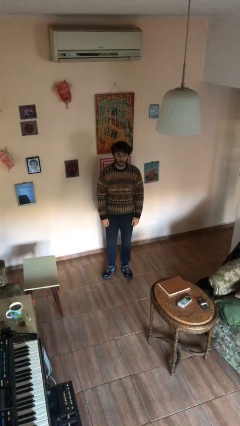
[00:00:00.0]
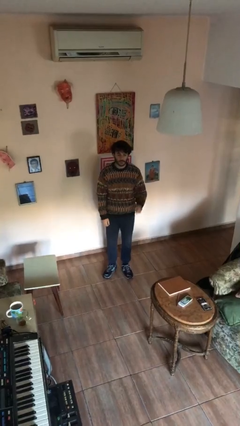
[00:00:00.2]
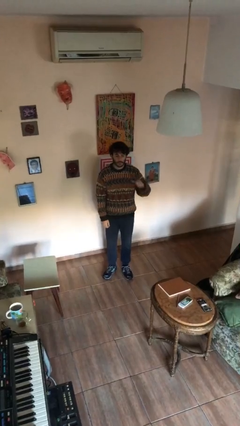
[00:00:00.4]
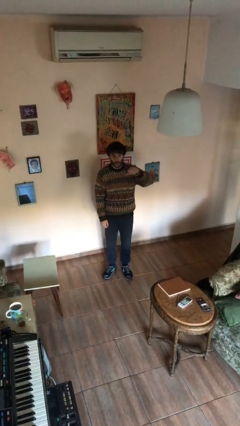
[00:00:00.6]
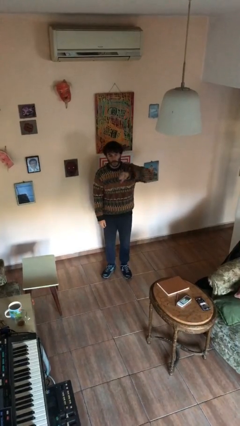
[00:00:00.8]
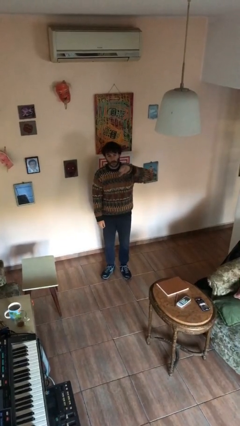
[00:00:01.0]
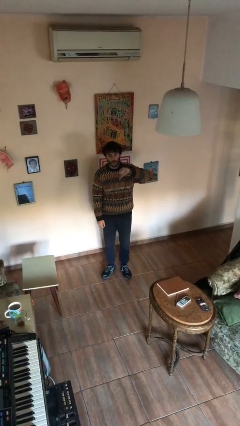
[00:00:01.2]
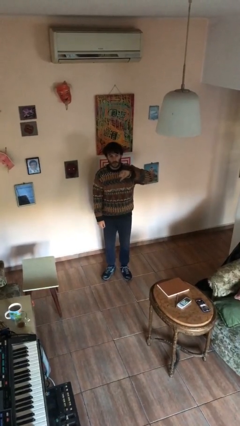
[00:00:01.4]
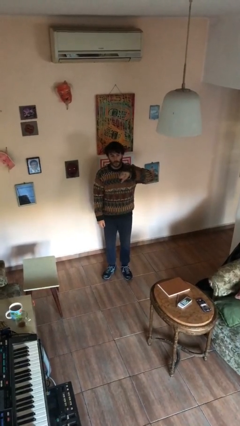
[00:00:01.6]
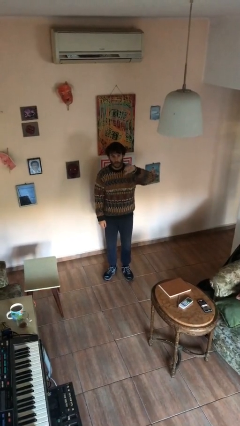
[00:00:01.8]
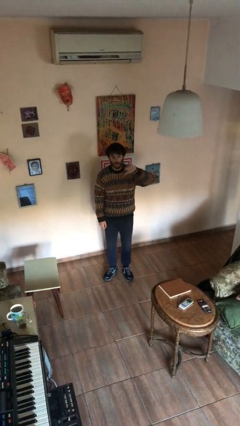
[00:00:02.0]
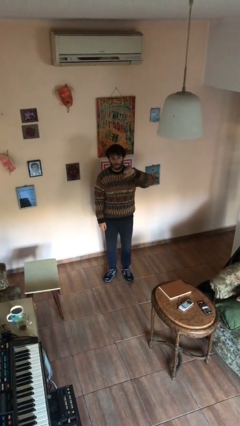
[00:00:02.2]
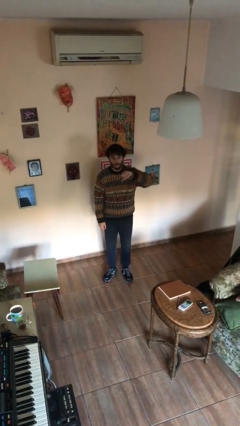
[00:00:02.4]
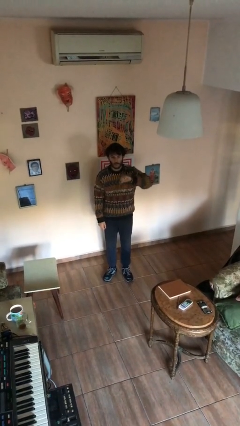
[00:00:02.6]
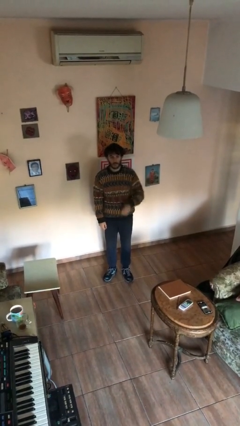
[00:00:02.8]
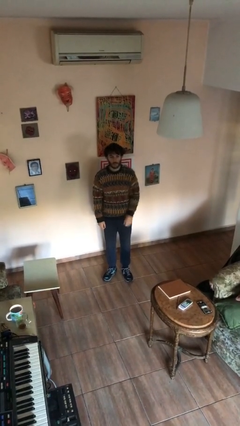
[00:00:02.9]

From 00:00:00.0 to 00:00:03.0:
person gestures thumbs down

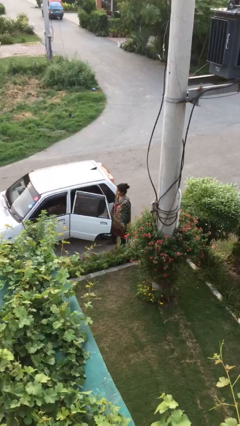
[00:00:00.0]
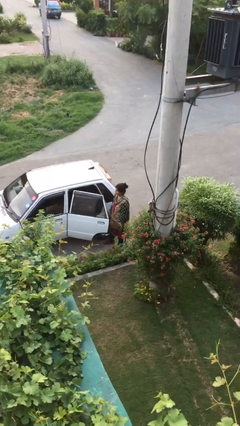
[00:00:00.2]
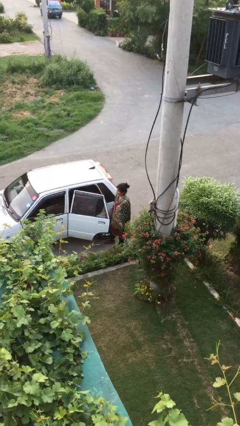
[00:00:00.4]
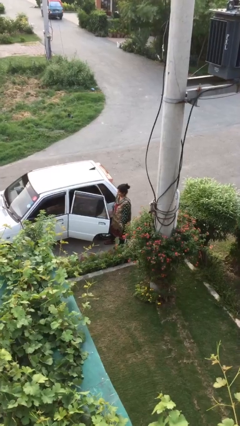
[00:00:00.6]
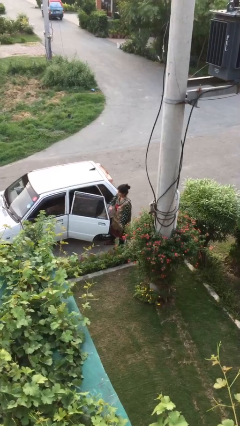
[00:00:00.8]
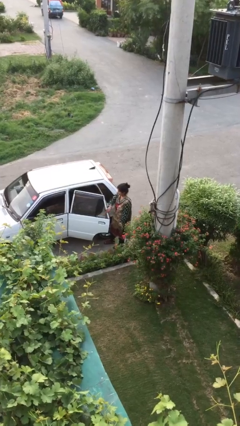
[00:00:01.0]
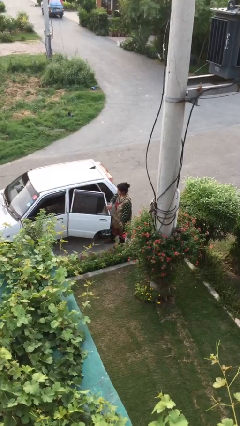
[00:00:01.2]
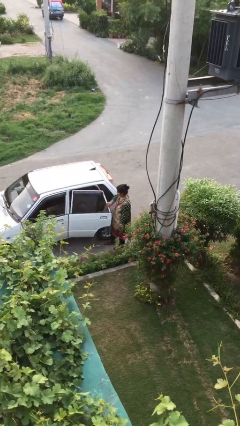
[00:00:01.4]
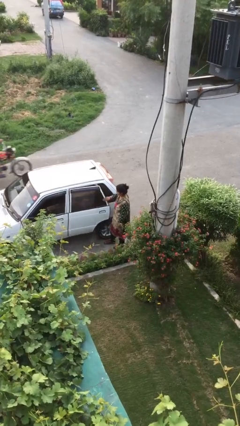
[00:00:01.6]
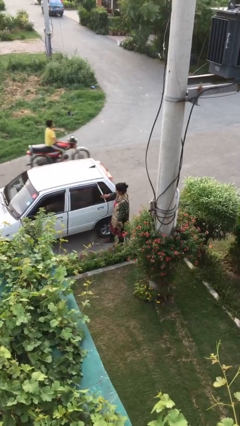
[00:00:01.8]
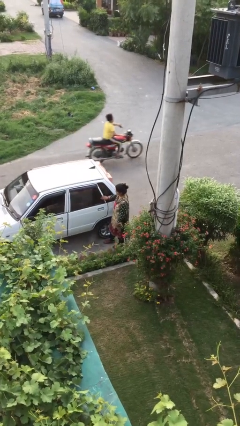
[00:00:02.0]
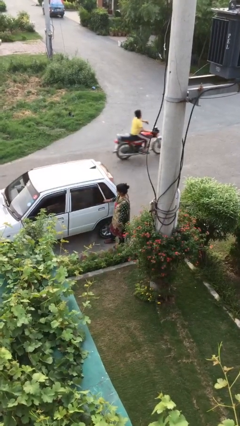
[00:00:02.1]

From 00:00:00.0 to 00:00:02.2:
person closes car door

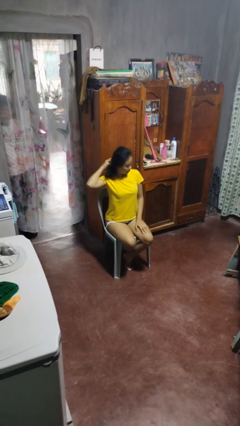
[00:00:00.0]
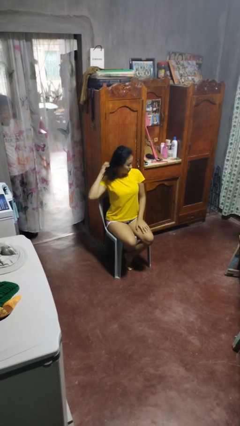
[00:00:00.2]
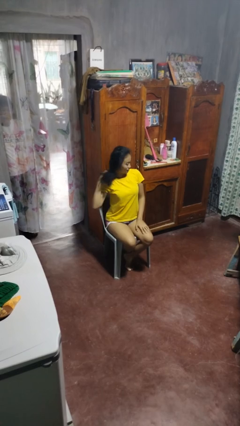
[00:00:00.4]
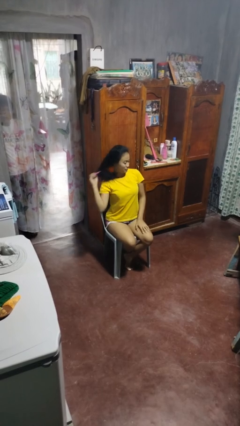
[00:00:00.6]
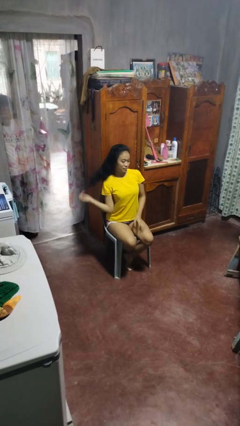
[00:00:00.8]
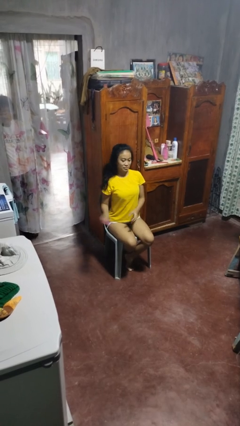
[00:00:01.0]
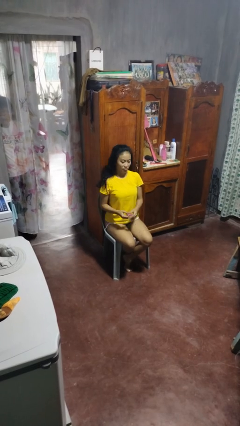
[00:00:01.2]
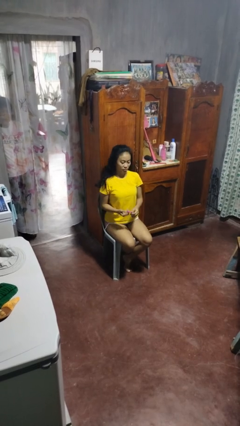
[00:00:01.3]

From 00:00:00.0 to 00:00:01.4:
person takes off hairtie

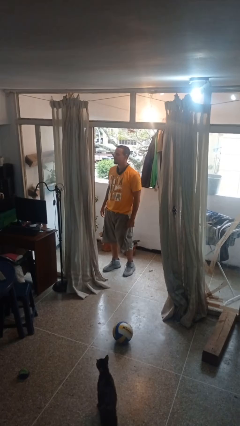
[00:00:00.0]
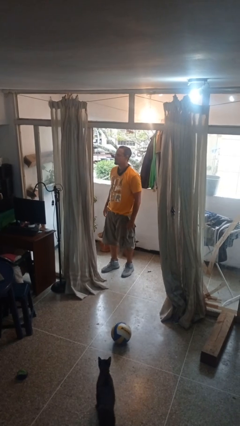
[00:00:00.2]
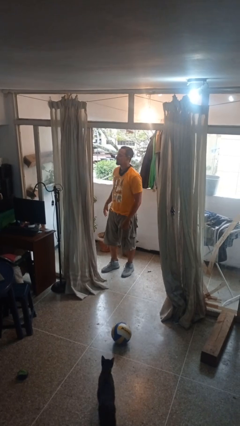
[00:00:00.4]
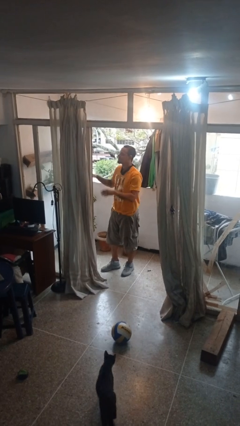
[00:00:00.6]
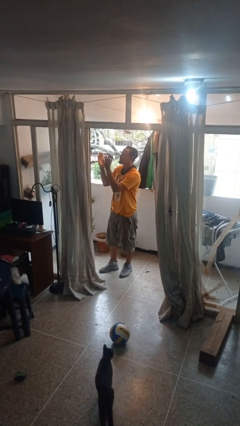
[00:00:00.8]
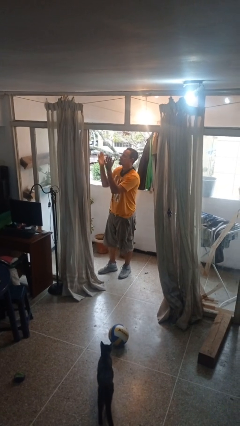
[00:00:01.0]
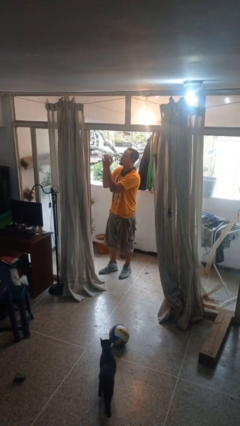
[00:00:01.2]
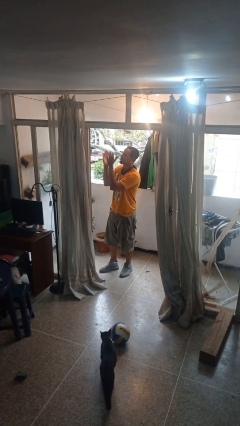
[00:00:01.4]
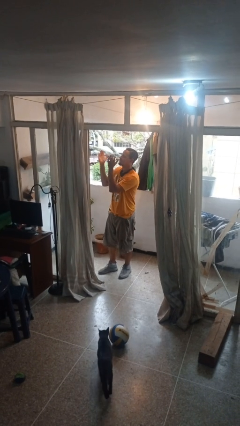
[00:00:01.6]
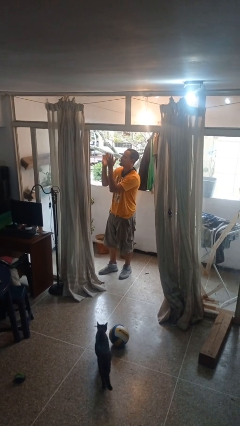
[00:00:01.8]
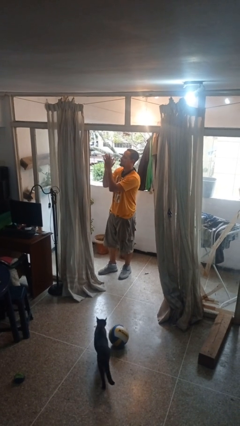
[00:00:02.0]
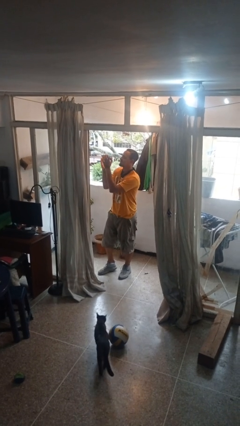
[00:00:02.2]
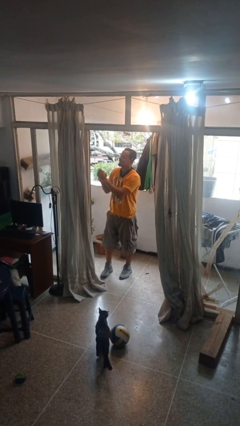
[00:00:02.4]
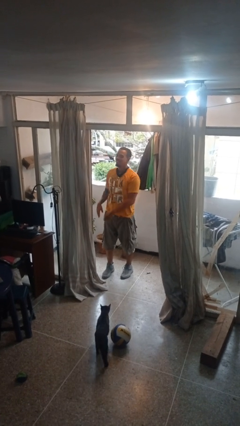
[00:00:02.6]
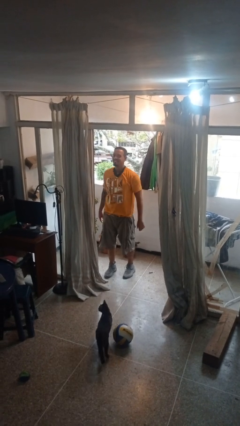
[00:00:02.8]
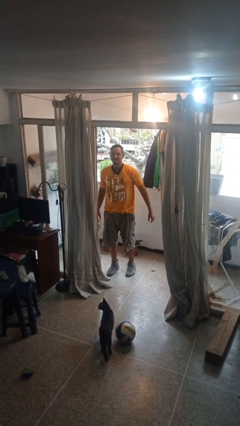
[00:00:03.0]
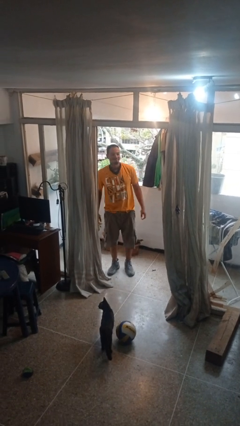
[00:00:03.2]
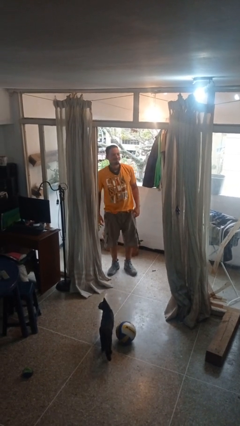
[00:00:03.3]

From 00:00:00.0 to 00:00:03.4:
person claps hands

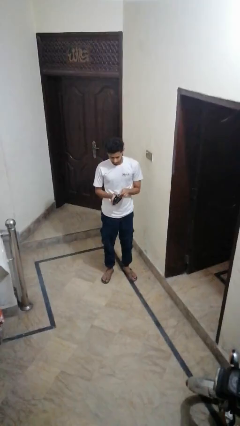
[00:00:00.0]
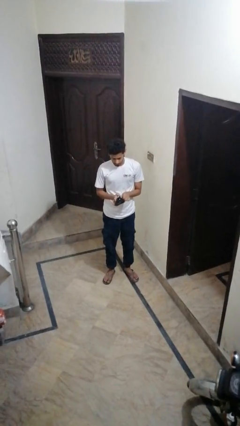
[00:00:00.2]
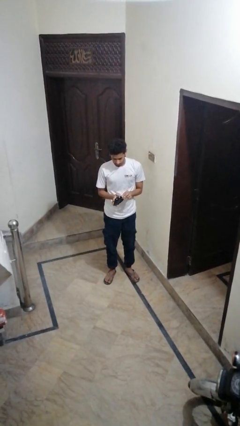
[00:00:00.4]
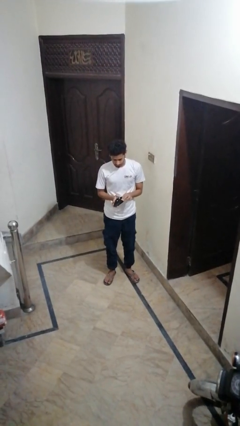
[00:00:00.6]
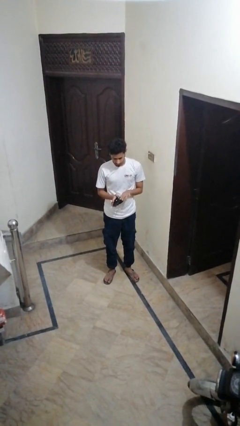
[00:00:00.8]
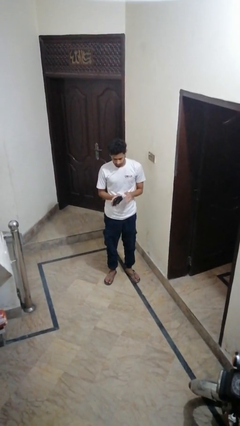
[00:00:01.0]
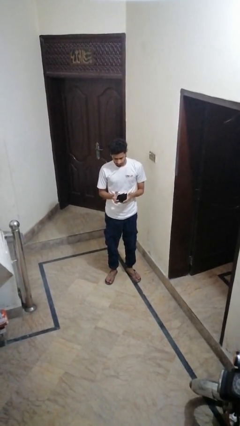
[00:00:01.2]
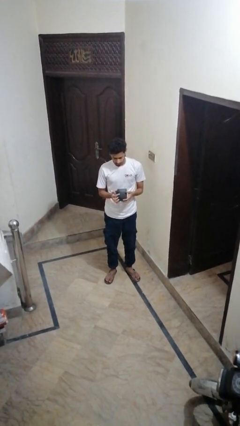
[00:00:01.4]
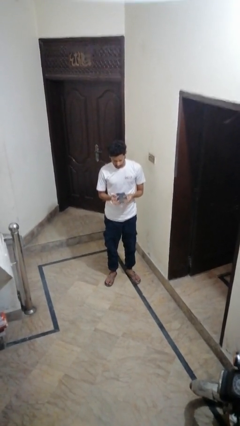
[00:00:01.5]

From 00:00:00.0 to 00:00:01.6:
person puts object into purse

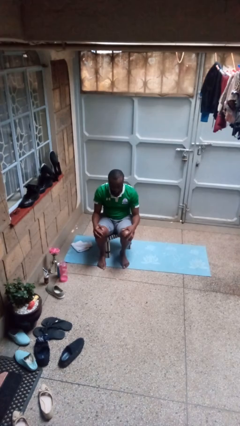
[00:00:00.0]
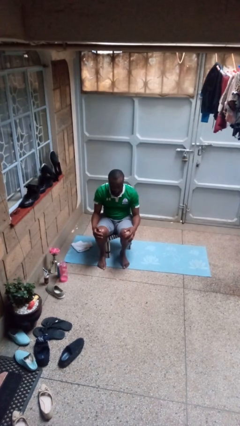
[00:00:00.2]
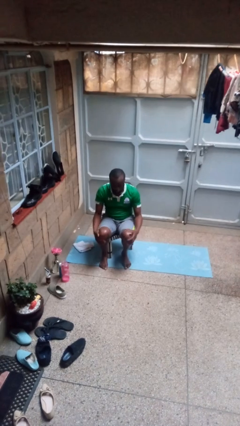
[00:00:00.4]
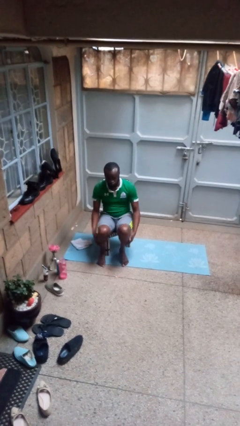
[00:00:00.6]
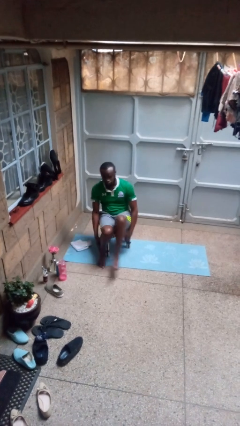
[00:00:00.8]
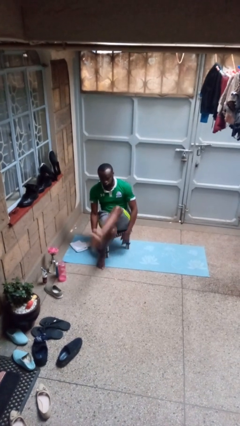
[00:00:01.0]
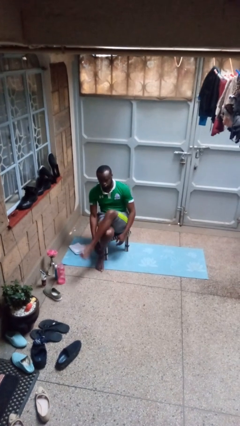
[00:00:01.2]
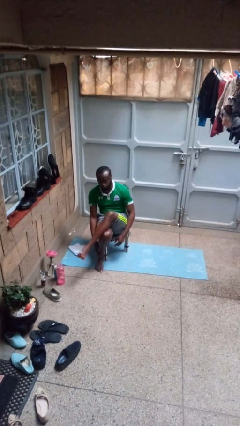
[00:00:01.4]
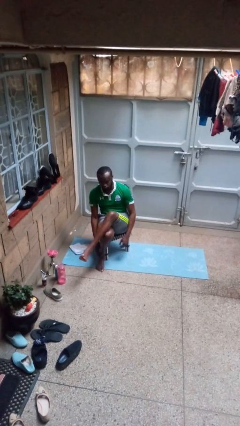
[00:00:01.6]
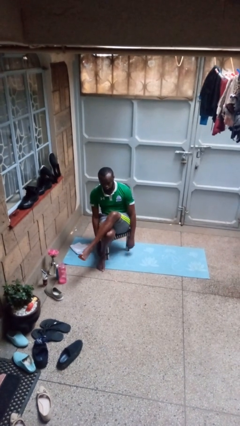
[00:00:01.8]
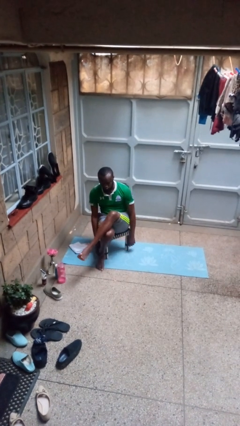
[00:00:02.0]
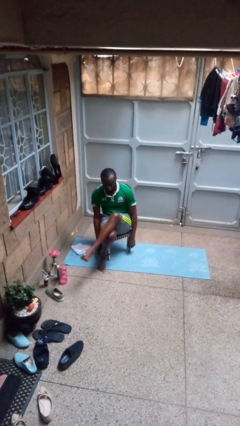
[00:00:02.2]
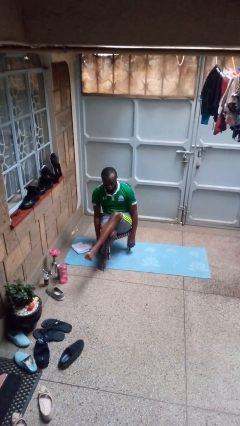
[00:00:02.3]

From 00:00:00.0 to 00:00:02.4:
person crosses legs

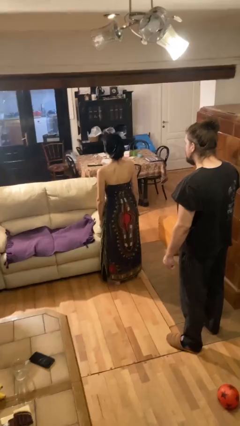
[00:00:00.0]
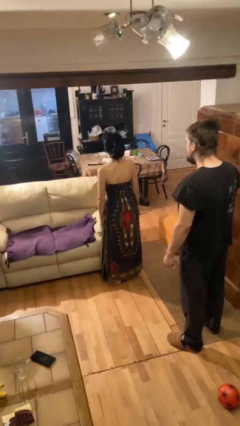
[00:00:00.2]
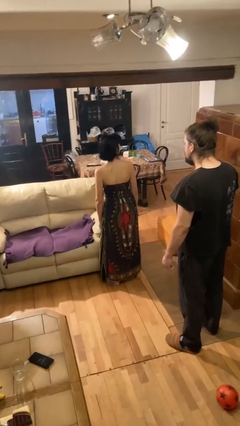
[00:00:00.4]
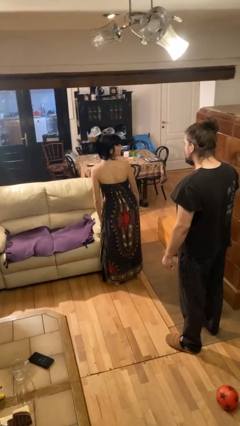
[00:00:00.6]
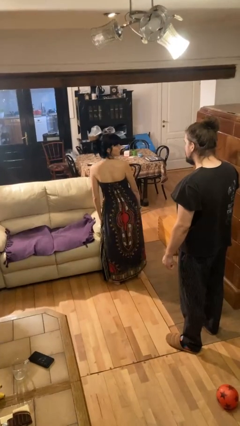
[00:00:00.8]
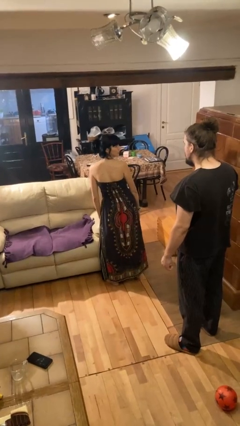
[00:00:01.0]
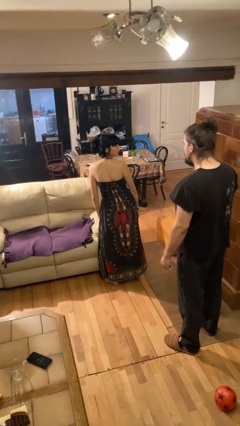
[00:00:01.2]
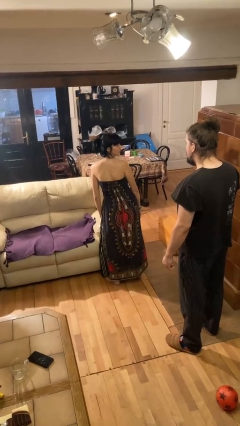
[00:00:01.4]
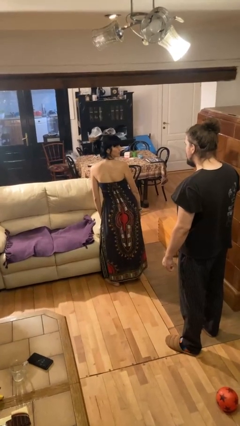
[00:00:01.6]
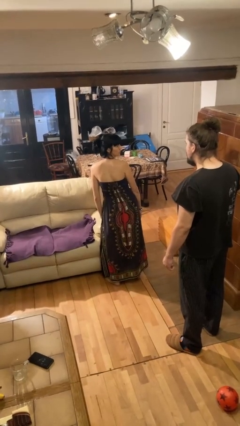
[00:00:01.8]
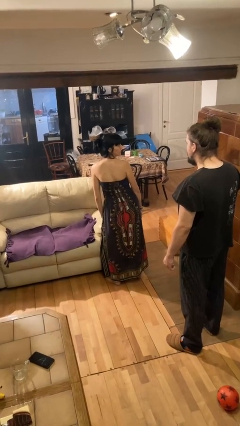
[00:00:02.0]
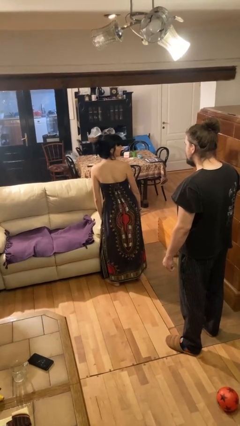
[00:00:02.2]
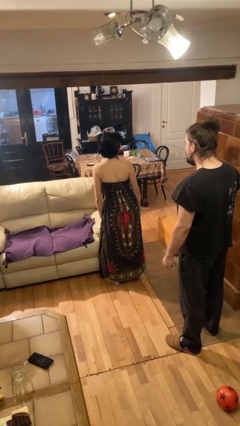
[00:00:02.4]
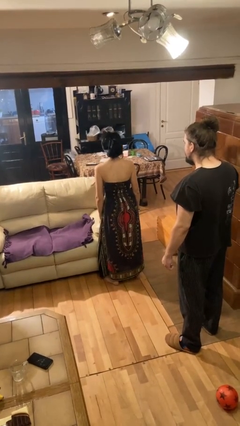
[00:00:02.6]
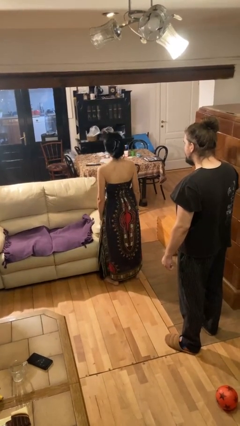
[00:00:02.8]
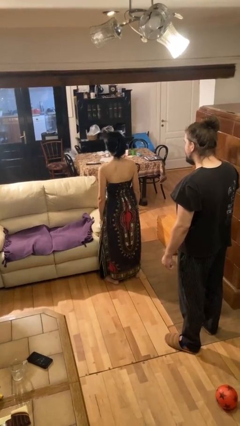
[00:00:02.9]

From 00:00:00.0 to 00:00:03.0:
person looks over shoulder
